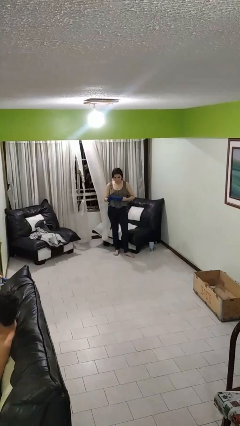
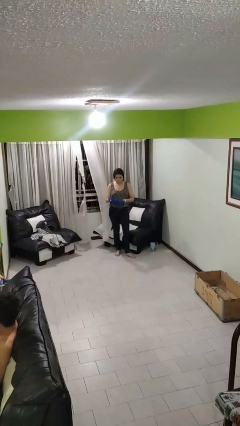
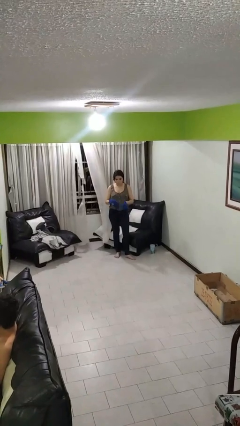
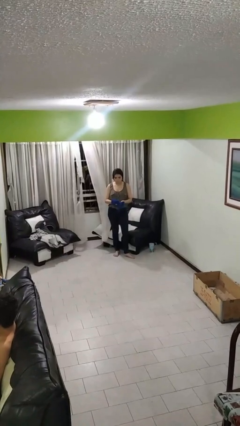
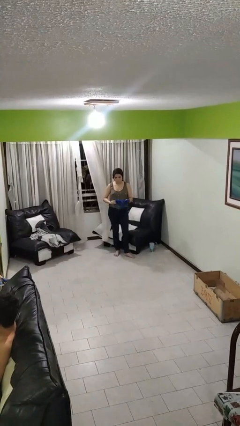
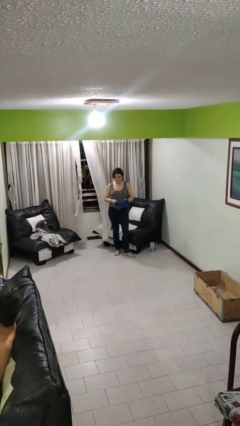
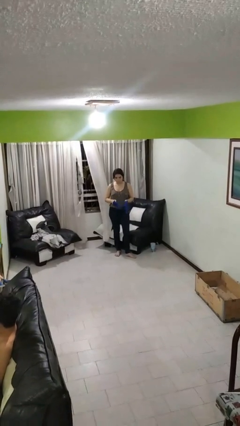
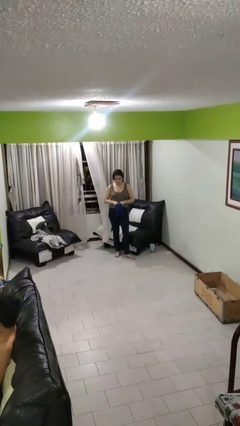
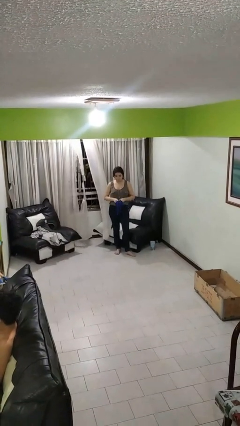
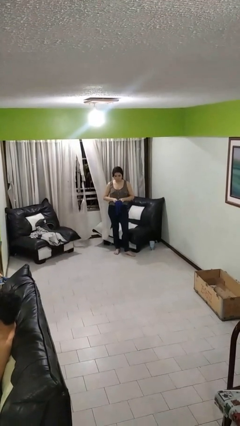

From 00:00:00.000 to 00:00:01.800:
person takes off gloves

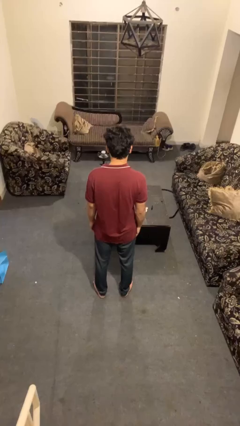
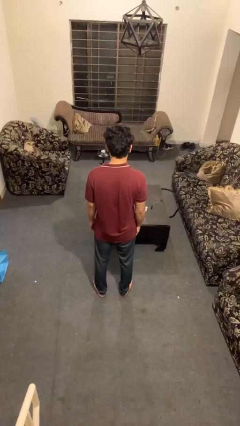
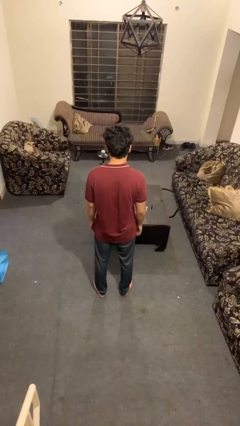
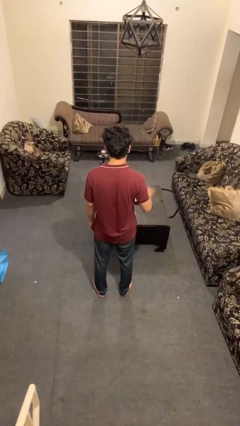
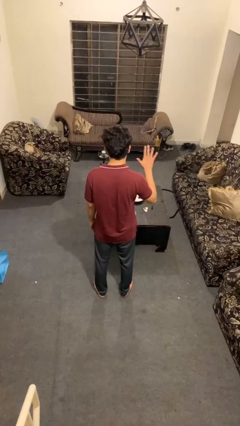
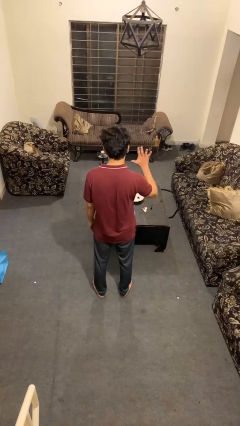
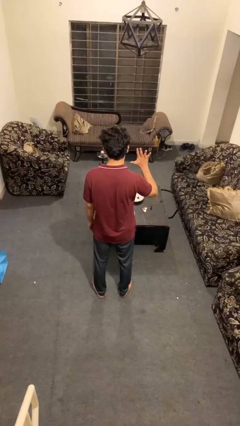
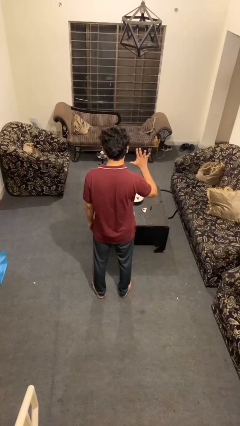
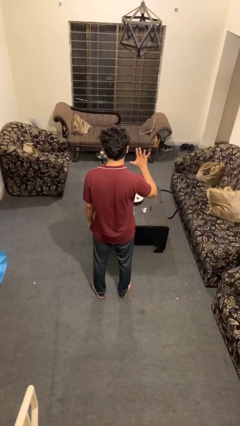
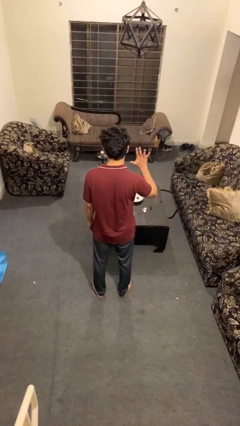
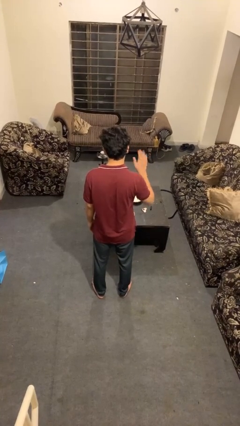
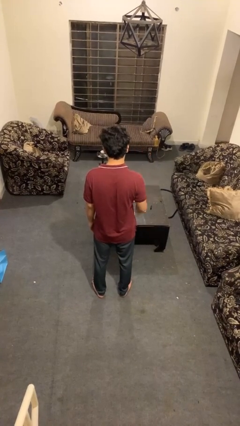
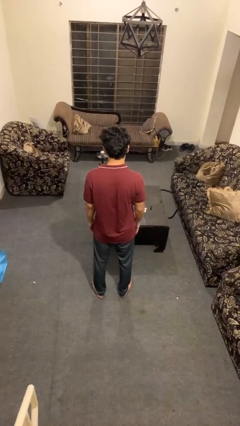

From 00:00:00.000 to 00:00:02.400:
person gestures number five

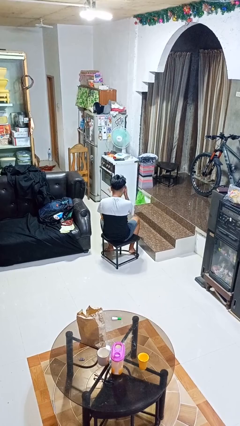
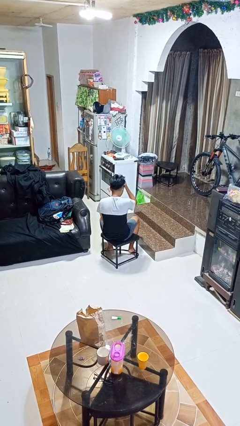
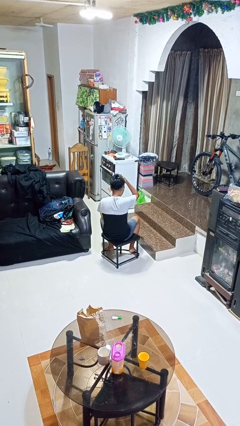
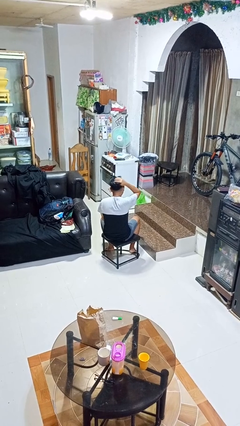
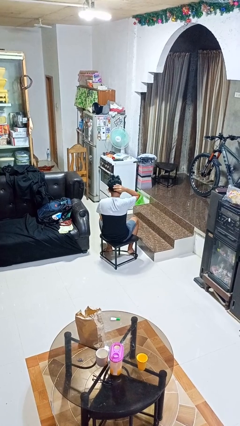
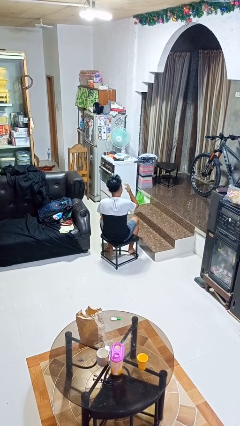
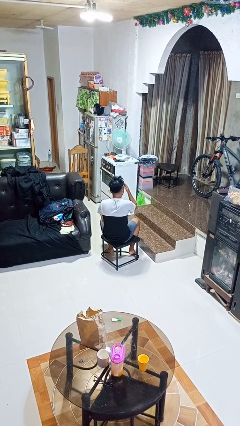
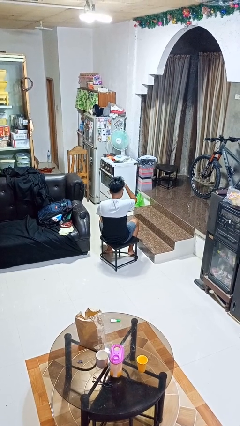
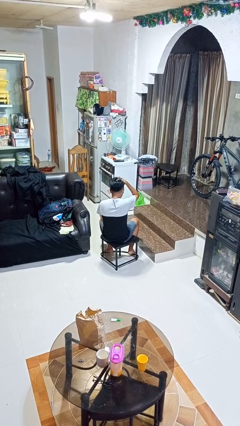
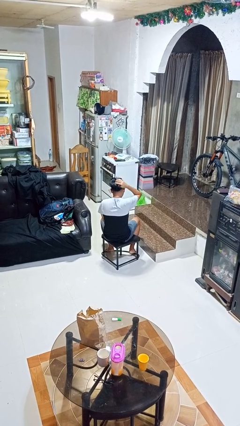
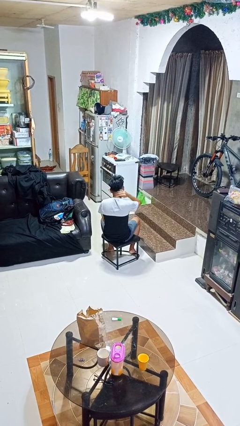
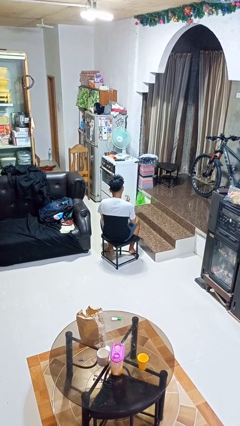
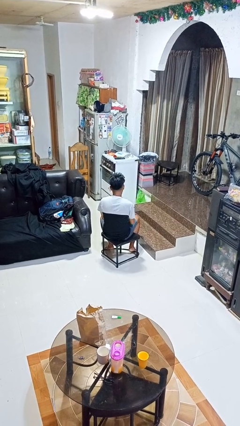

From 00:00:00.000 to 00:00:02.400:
person strokes hair

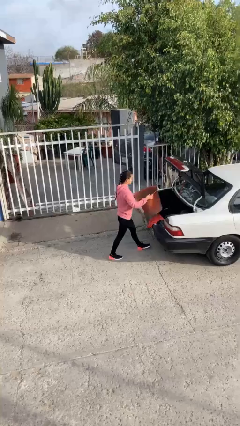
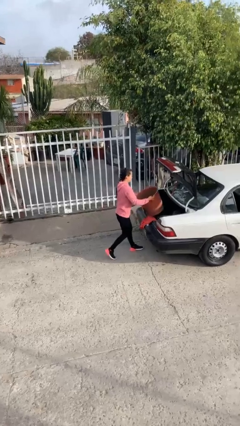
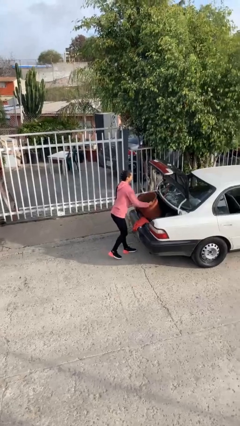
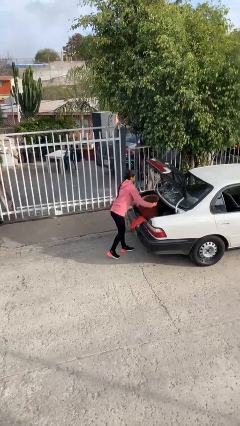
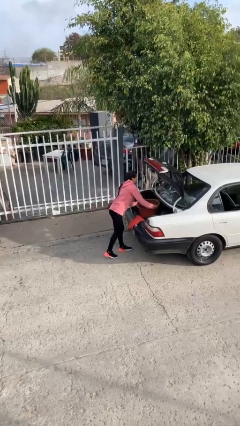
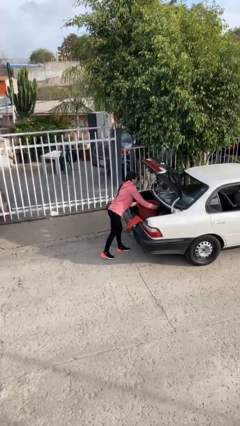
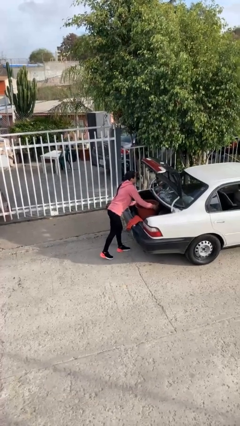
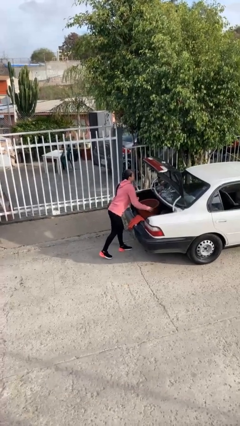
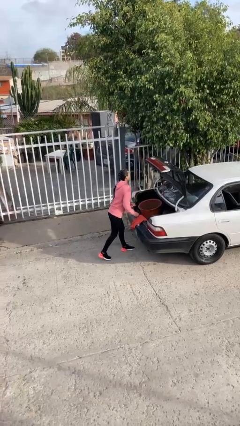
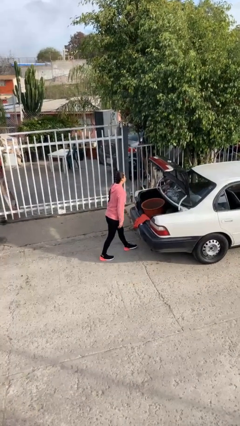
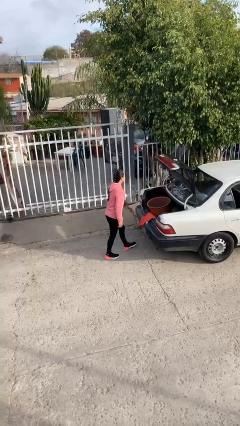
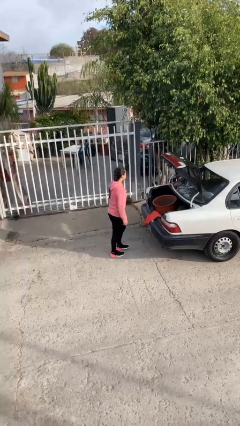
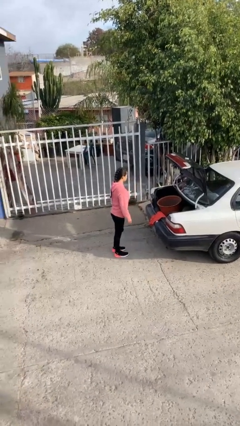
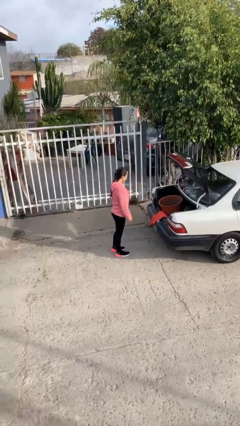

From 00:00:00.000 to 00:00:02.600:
person loads car

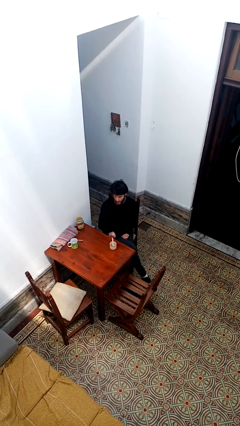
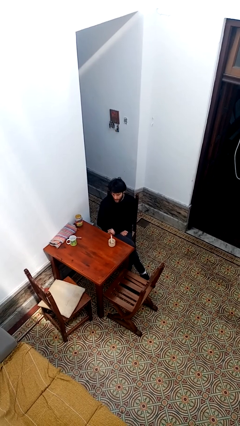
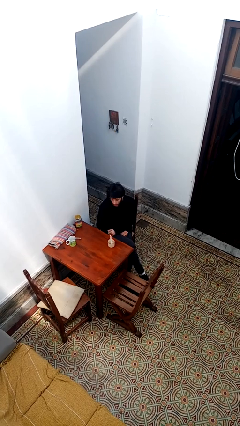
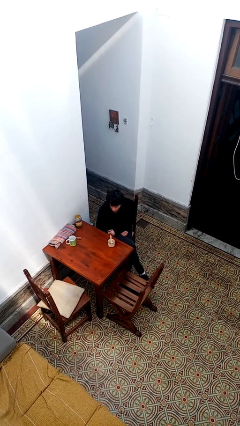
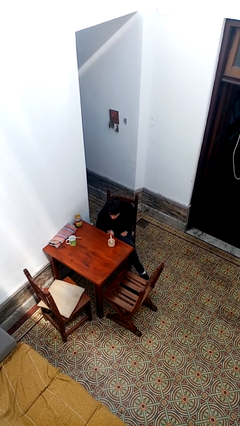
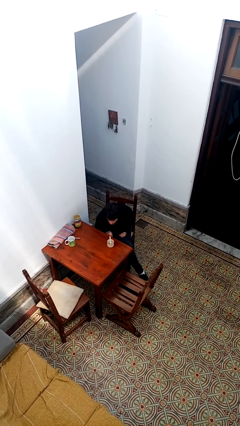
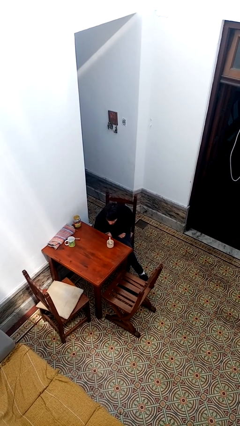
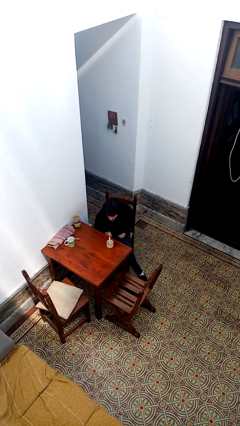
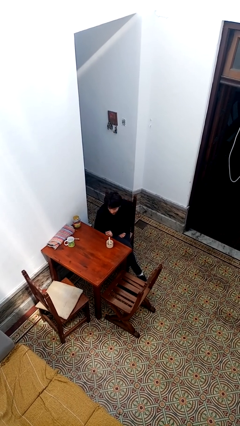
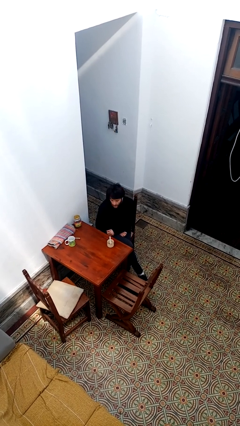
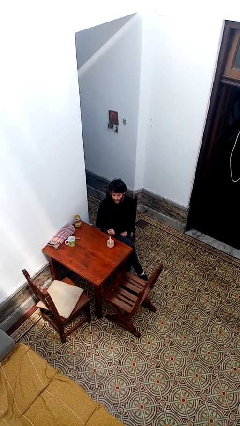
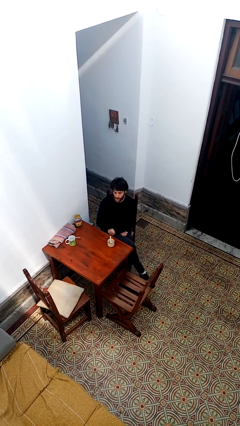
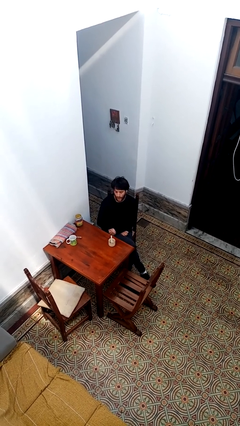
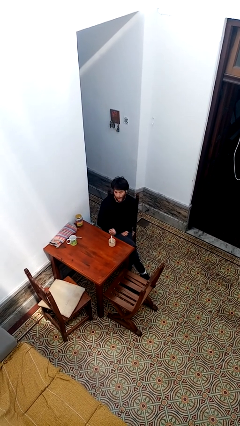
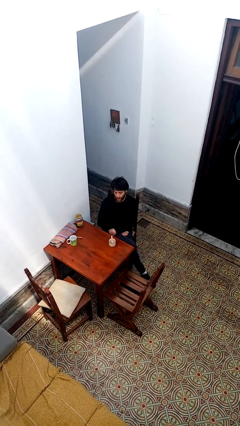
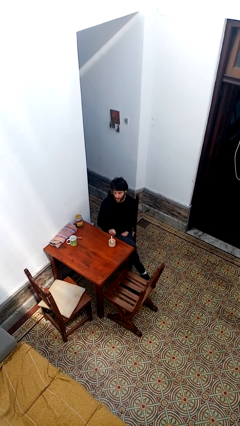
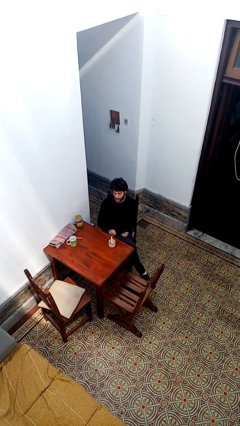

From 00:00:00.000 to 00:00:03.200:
person extinguishes candle

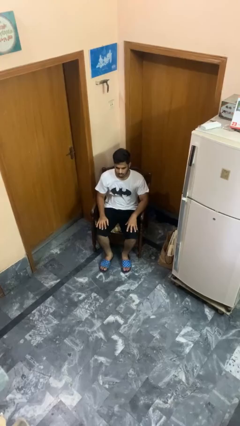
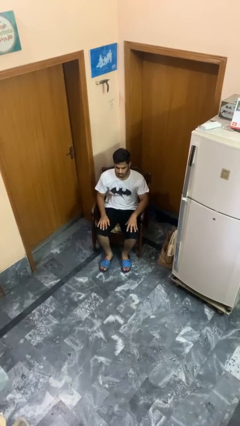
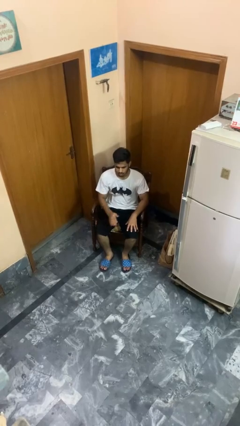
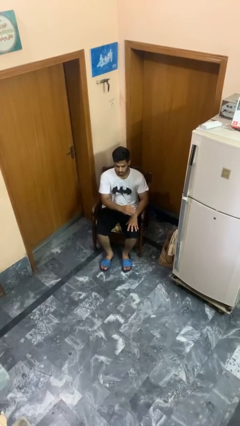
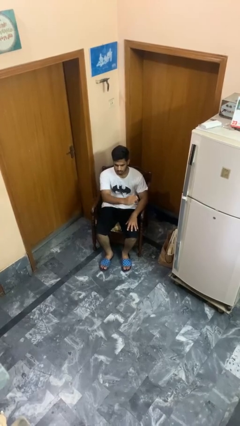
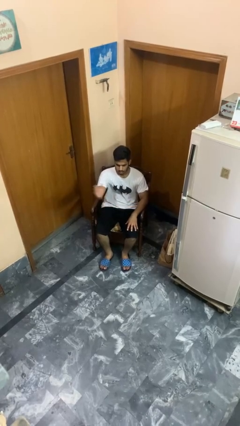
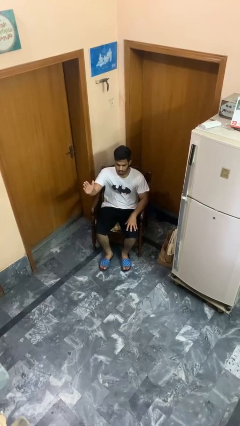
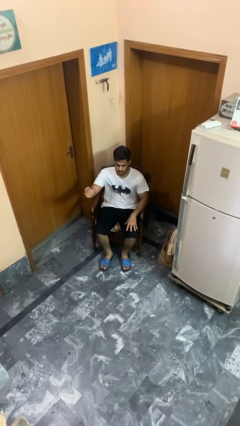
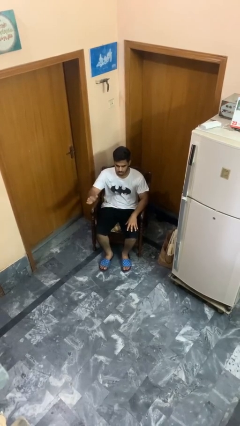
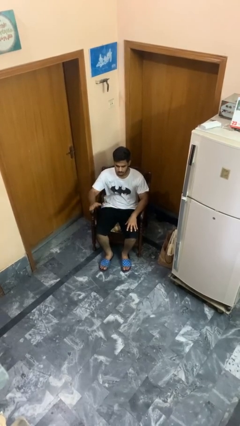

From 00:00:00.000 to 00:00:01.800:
person gestures swipe right

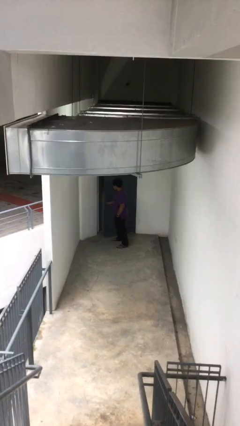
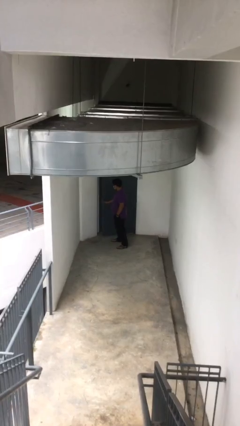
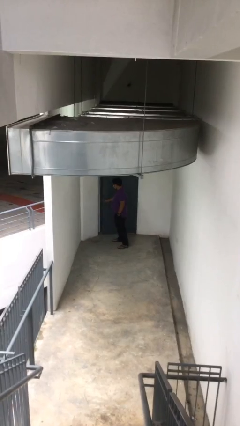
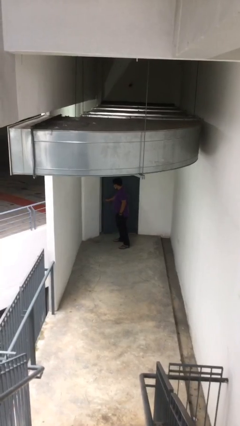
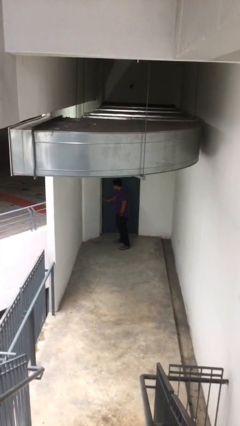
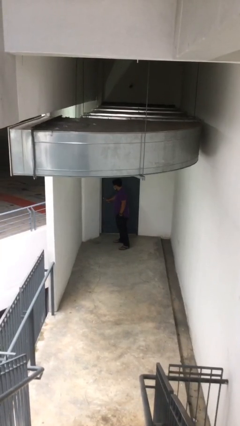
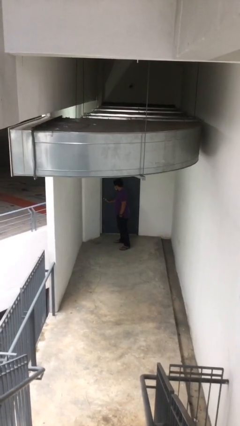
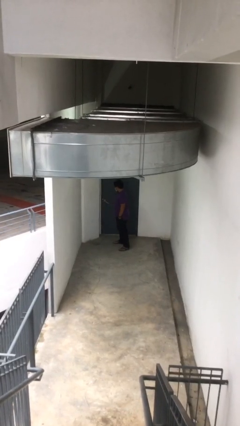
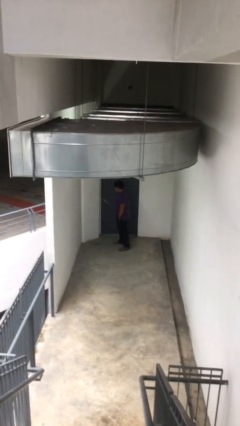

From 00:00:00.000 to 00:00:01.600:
person closes facility door

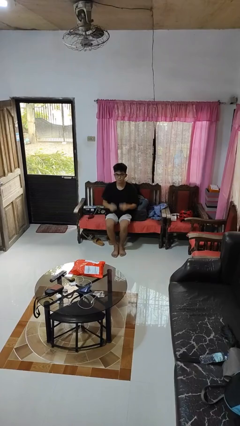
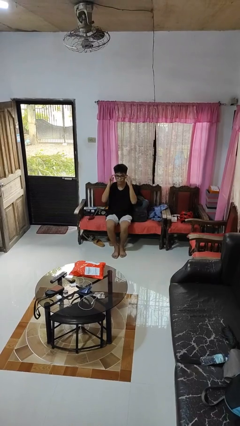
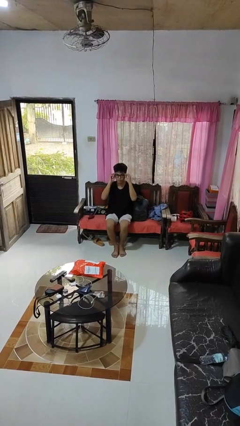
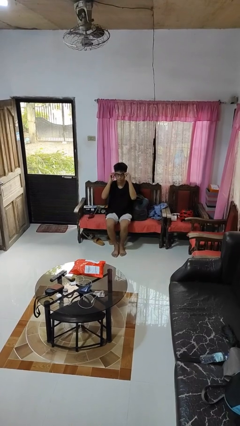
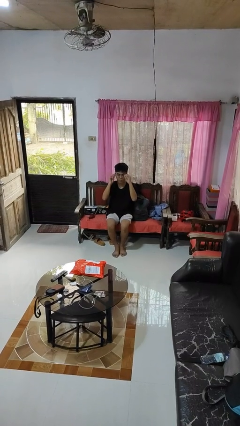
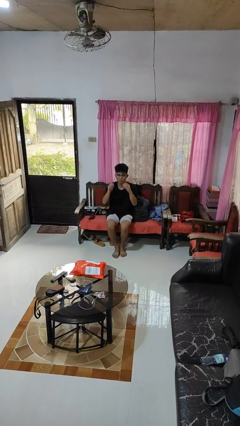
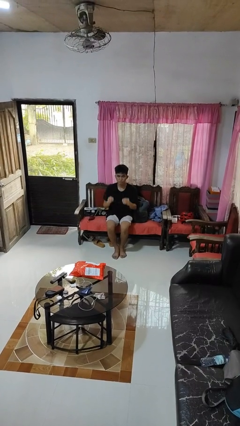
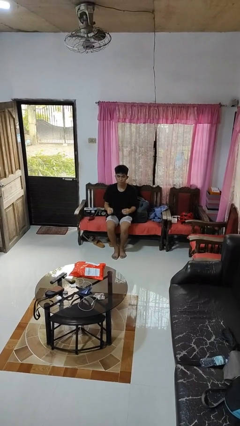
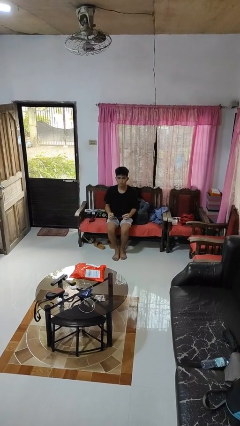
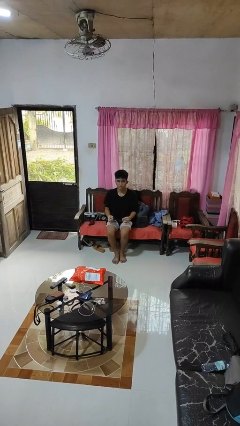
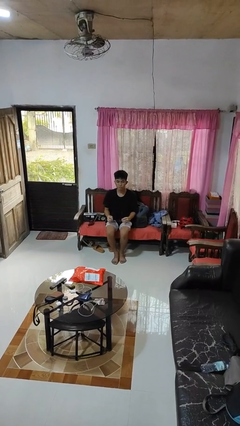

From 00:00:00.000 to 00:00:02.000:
person takes off glasses
